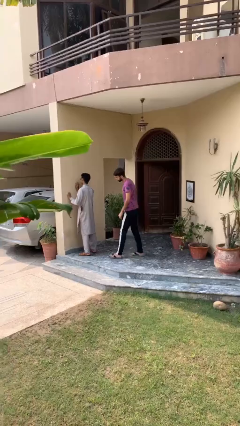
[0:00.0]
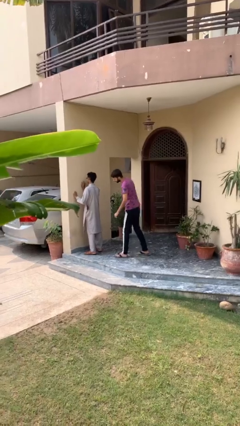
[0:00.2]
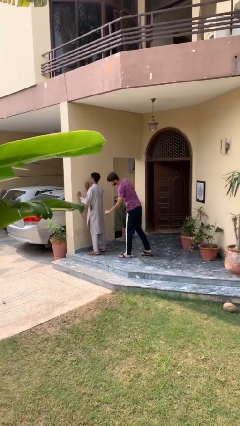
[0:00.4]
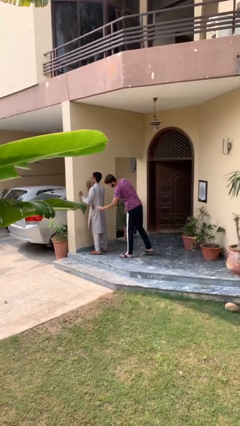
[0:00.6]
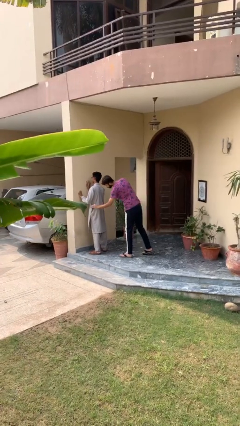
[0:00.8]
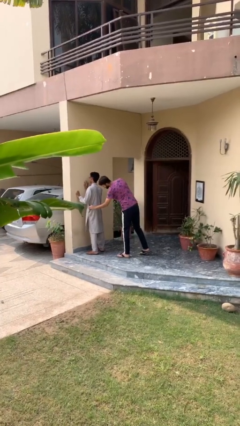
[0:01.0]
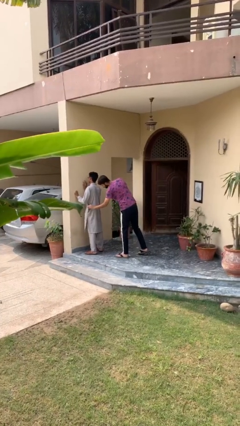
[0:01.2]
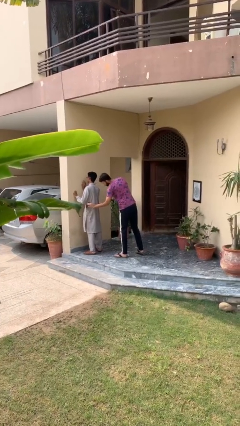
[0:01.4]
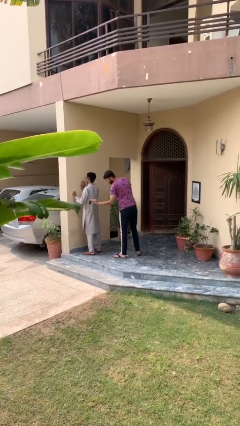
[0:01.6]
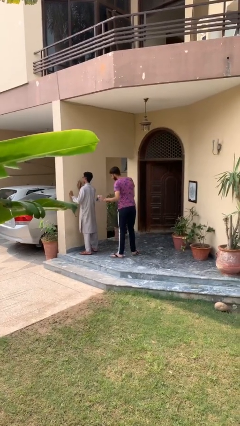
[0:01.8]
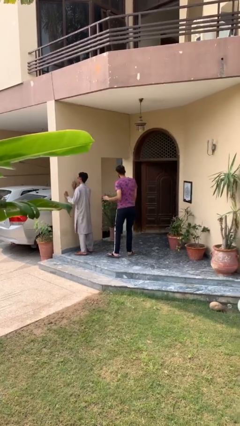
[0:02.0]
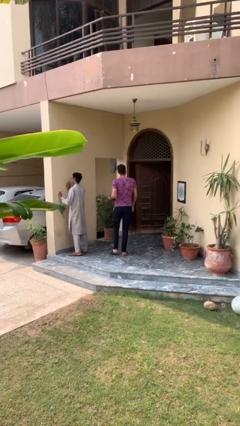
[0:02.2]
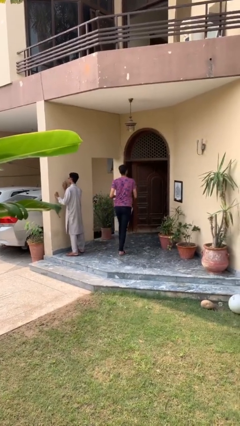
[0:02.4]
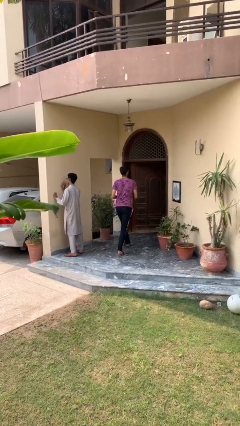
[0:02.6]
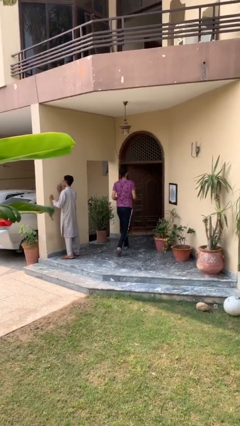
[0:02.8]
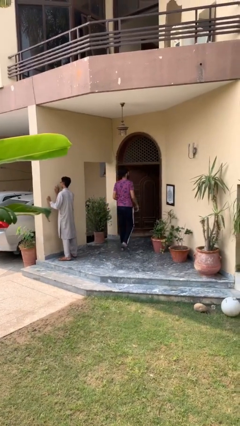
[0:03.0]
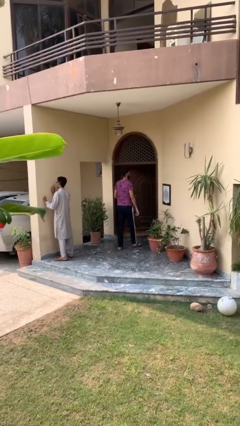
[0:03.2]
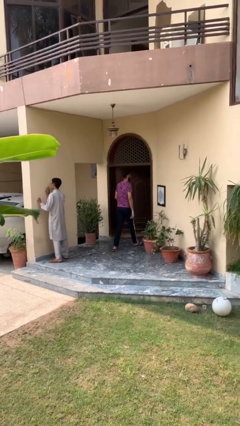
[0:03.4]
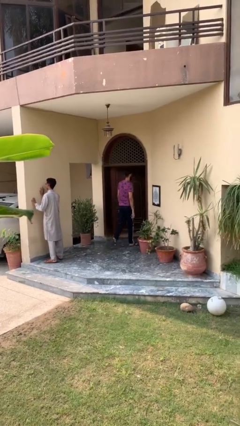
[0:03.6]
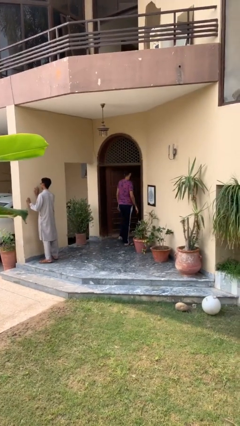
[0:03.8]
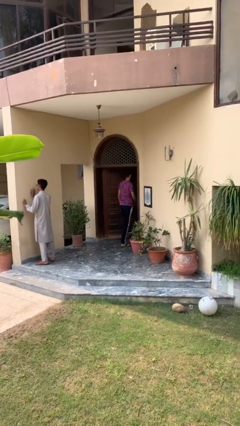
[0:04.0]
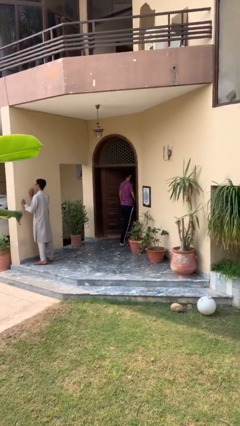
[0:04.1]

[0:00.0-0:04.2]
person steals object from person

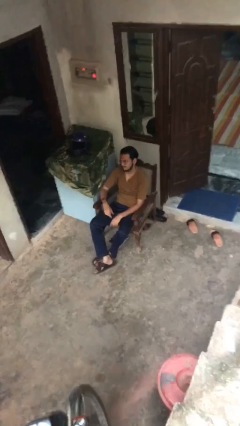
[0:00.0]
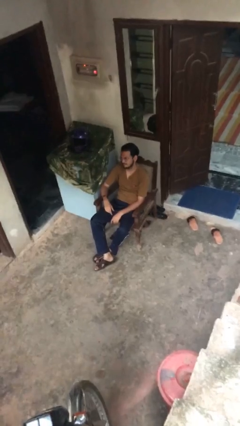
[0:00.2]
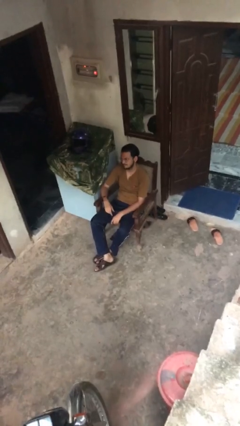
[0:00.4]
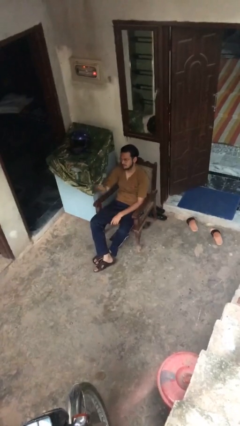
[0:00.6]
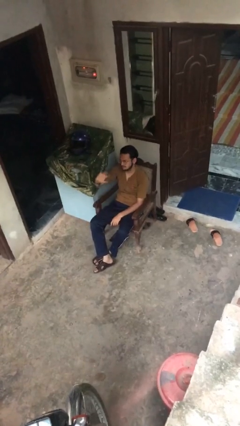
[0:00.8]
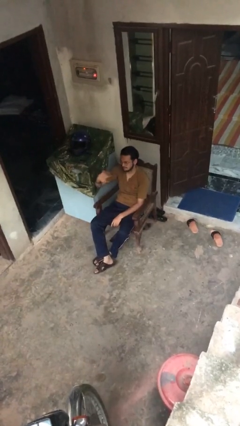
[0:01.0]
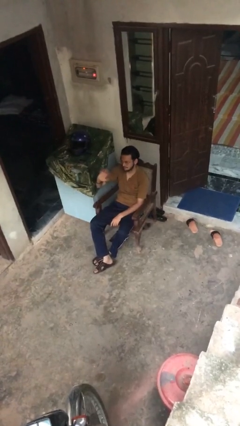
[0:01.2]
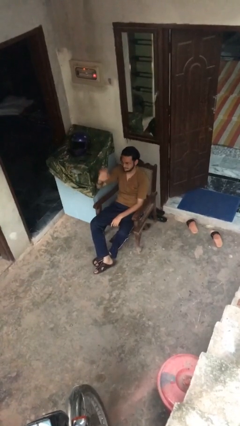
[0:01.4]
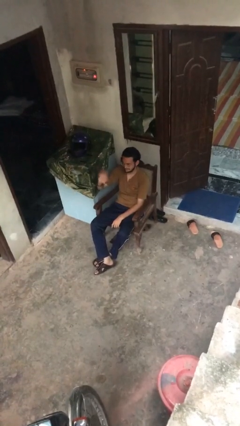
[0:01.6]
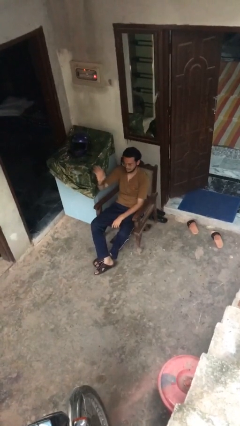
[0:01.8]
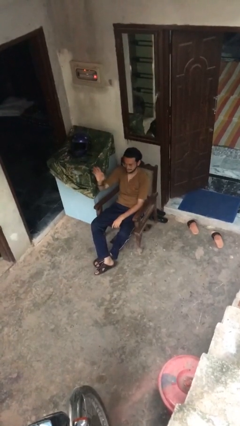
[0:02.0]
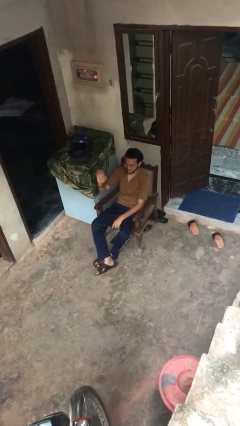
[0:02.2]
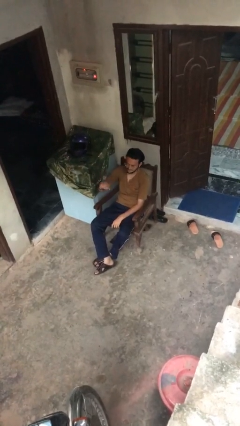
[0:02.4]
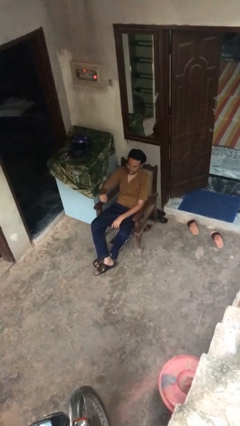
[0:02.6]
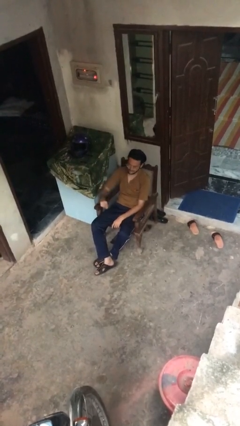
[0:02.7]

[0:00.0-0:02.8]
person waves at person

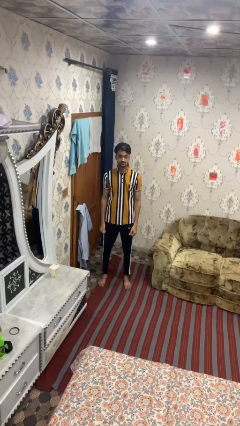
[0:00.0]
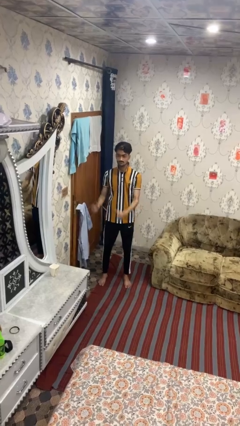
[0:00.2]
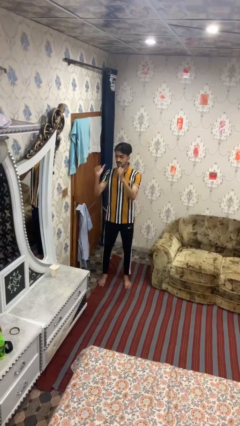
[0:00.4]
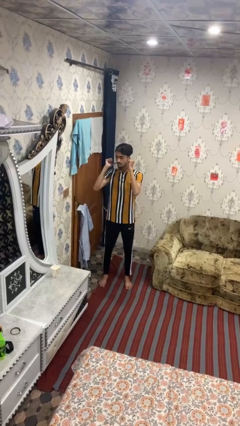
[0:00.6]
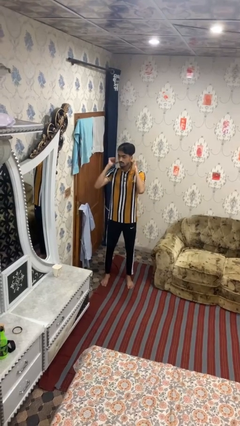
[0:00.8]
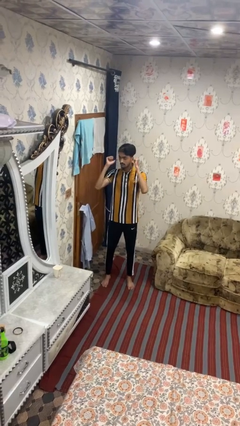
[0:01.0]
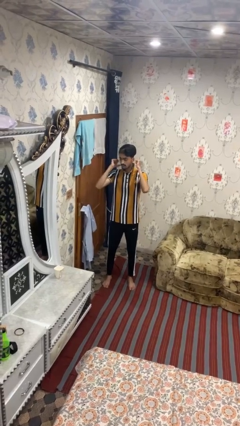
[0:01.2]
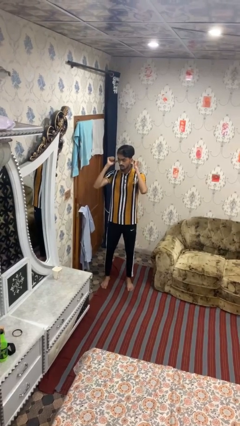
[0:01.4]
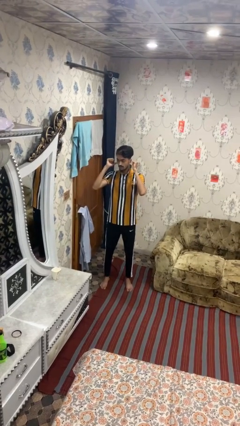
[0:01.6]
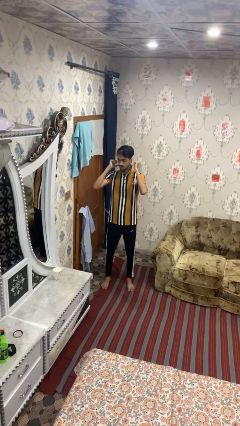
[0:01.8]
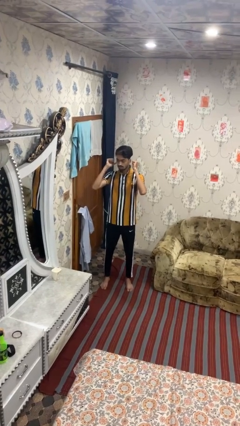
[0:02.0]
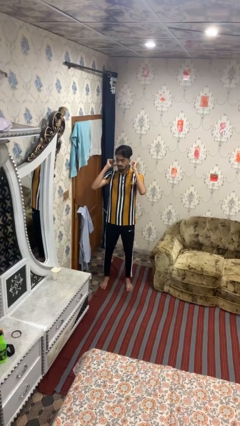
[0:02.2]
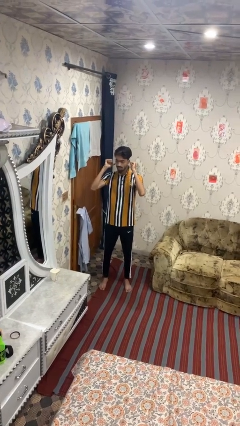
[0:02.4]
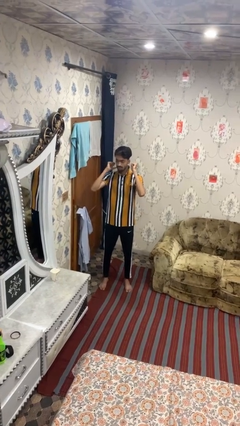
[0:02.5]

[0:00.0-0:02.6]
person gestures behind me

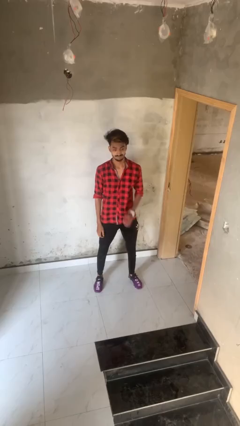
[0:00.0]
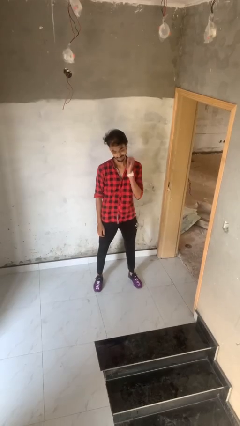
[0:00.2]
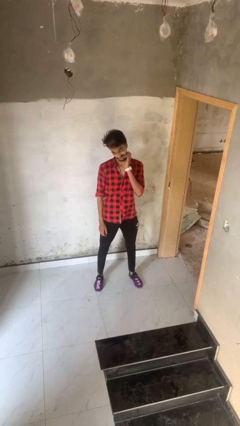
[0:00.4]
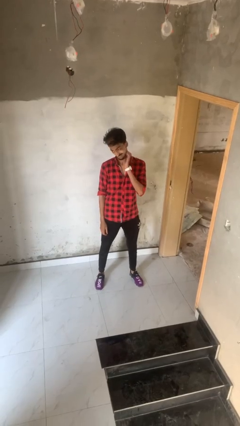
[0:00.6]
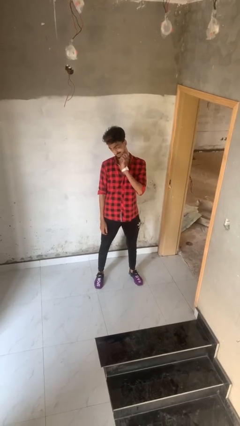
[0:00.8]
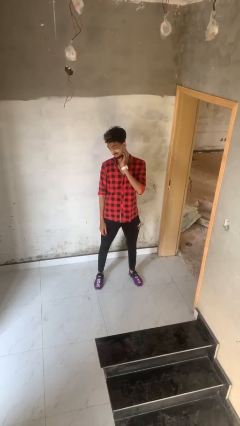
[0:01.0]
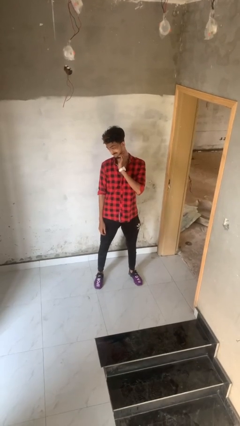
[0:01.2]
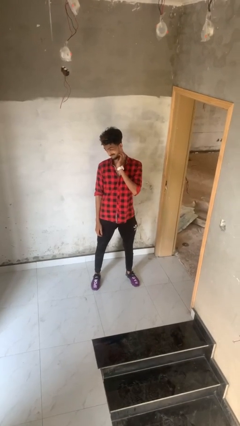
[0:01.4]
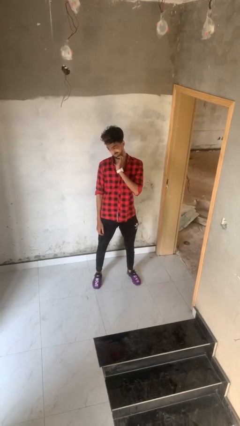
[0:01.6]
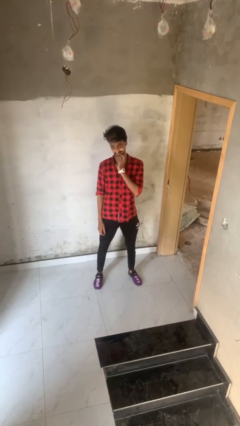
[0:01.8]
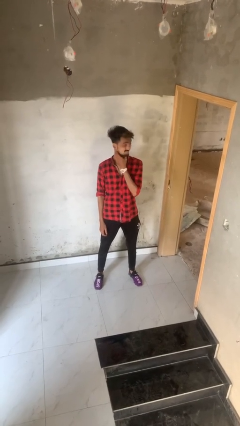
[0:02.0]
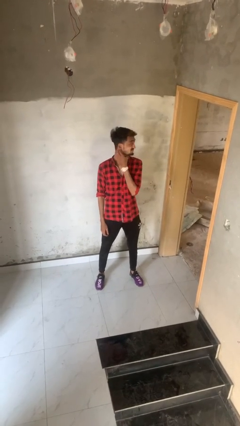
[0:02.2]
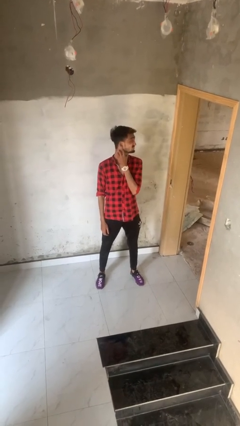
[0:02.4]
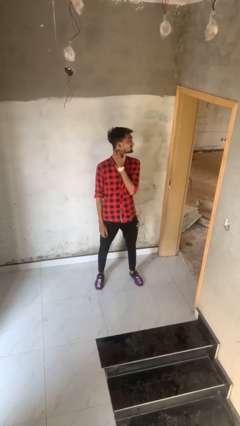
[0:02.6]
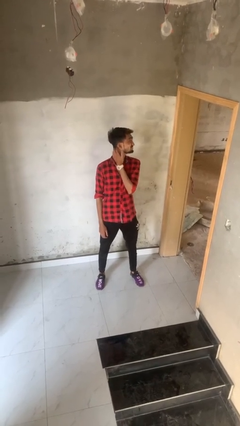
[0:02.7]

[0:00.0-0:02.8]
person scratches face

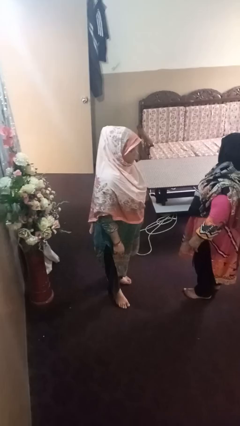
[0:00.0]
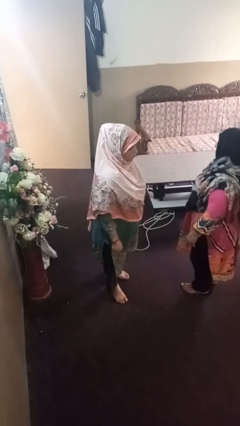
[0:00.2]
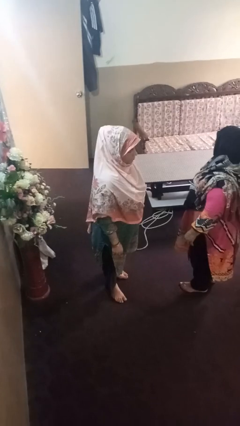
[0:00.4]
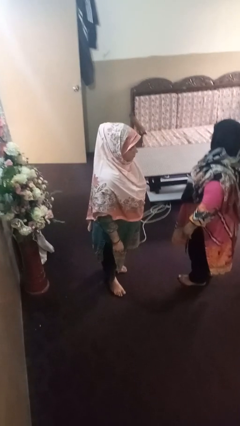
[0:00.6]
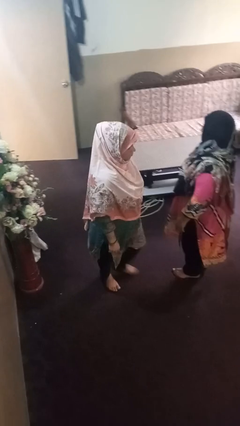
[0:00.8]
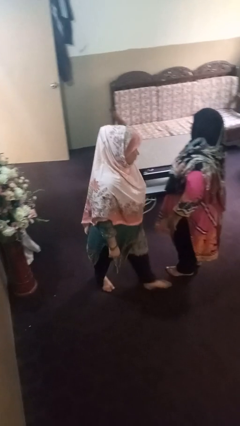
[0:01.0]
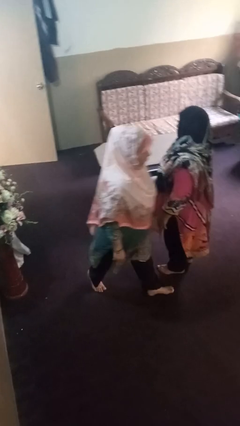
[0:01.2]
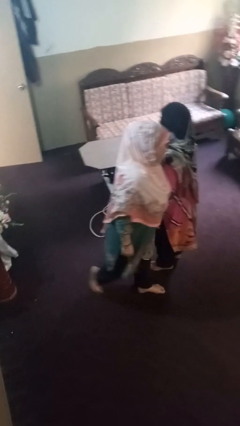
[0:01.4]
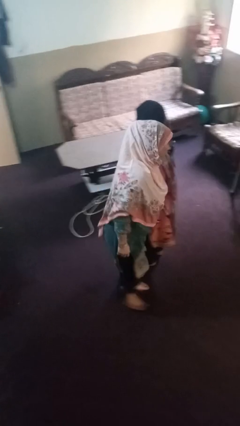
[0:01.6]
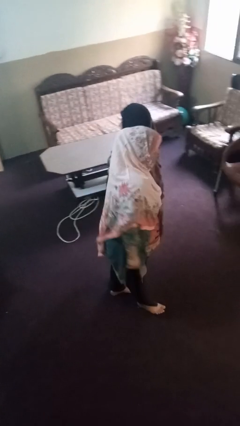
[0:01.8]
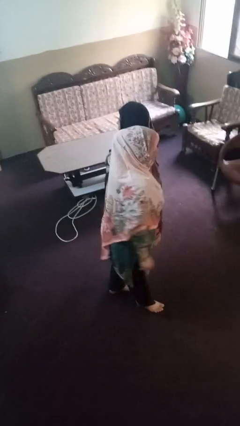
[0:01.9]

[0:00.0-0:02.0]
person shoves person

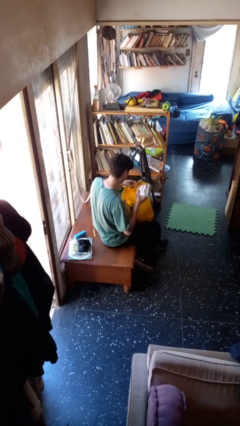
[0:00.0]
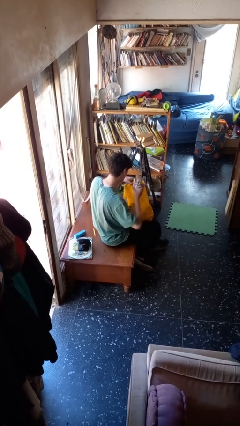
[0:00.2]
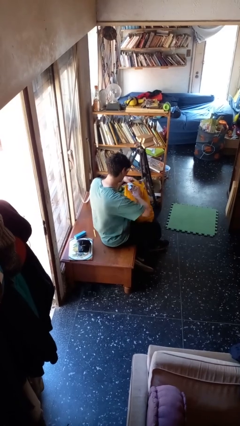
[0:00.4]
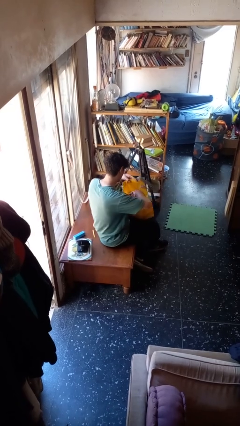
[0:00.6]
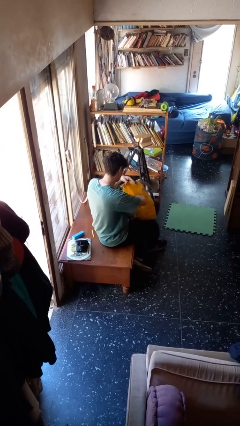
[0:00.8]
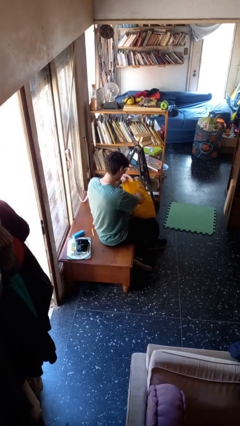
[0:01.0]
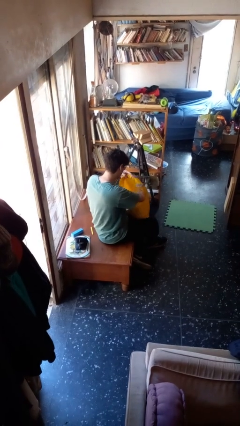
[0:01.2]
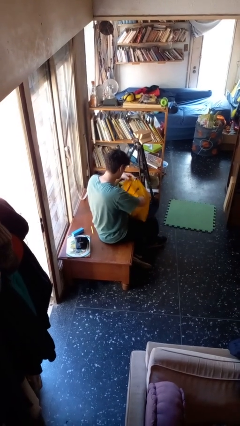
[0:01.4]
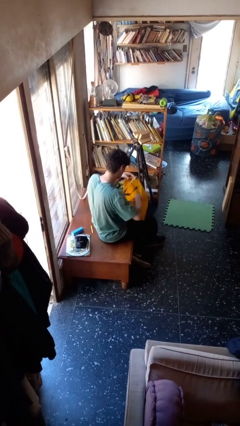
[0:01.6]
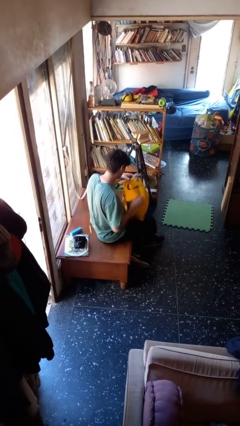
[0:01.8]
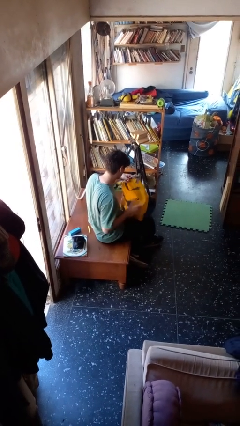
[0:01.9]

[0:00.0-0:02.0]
person puts object into bag

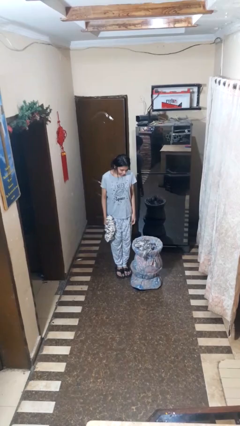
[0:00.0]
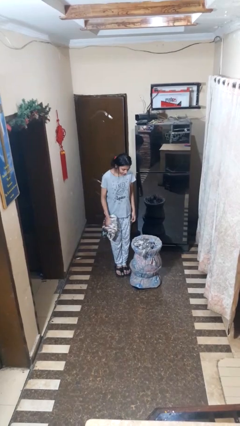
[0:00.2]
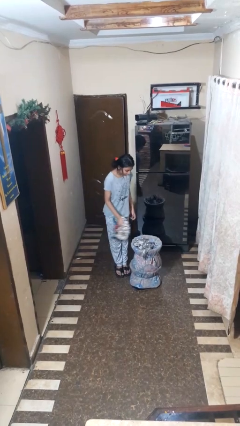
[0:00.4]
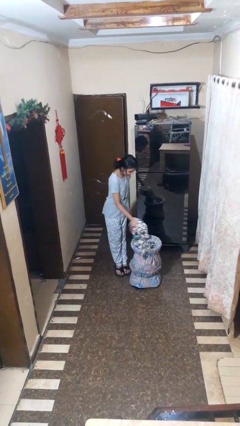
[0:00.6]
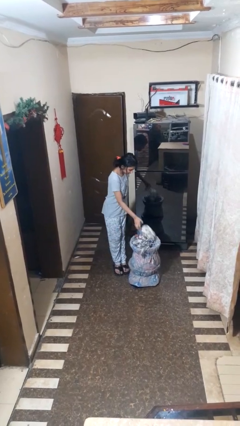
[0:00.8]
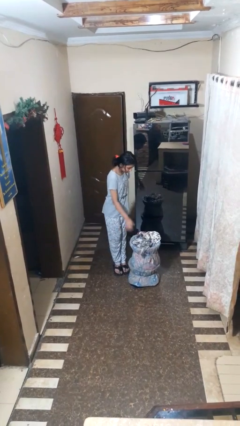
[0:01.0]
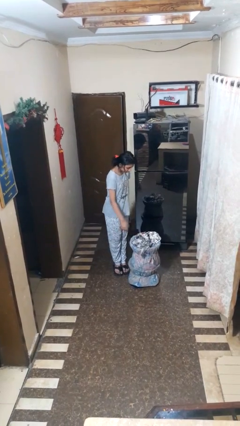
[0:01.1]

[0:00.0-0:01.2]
person takes object from basket
